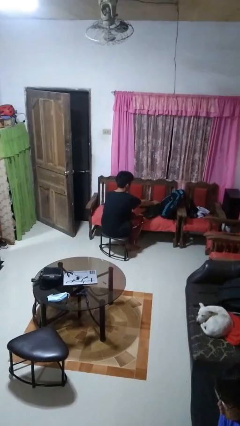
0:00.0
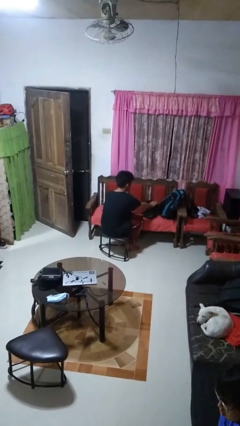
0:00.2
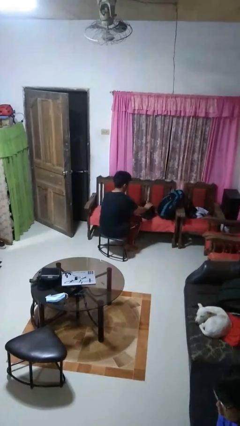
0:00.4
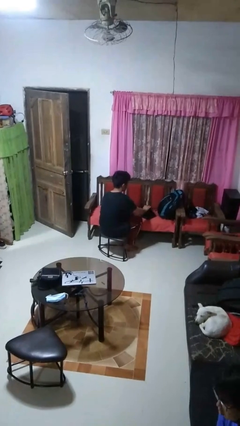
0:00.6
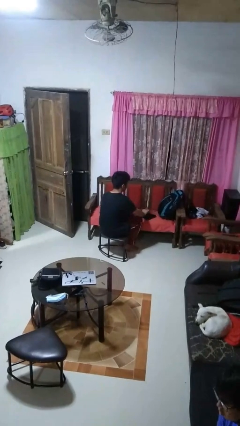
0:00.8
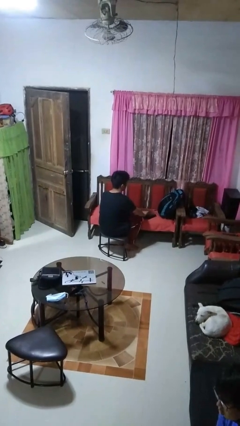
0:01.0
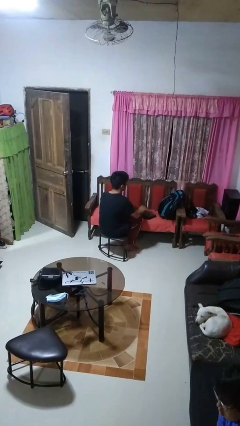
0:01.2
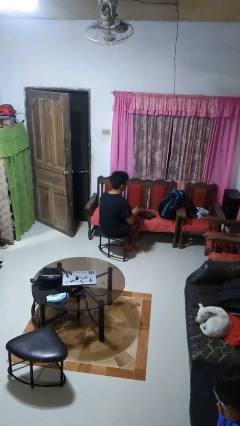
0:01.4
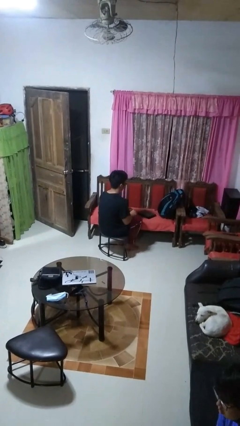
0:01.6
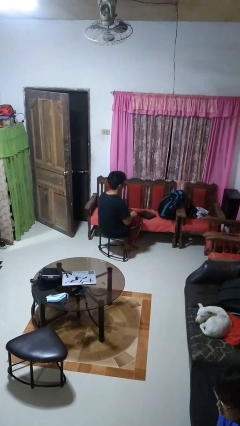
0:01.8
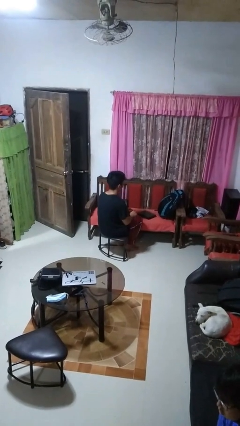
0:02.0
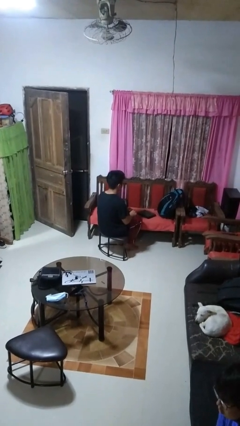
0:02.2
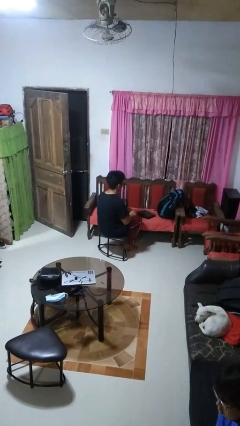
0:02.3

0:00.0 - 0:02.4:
person closes laptop

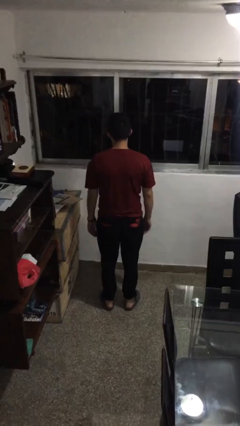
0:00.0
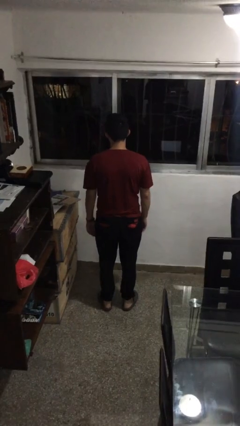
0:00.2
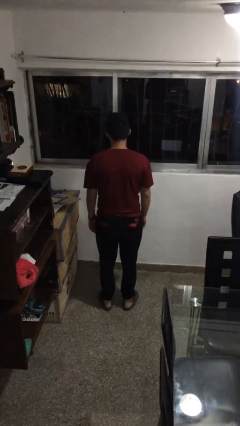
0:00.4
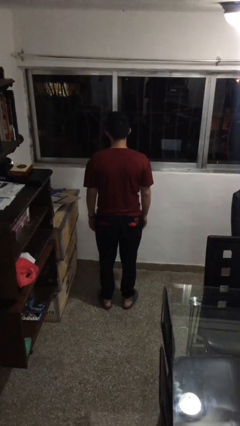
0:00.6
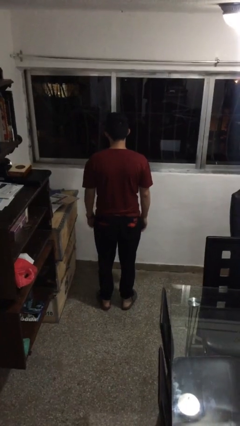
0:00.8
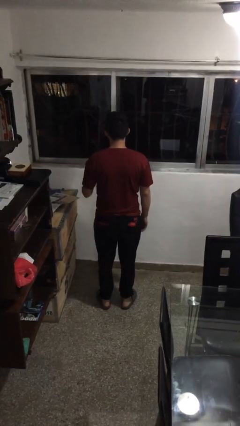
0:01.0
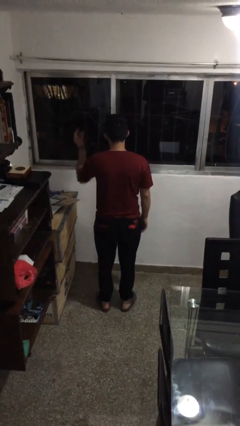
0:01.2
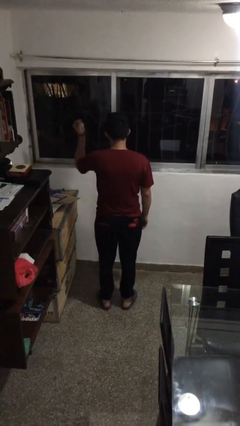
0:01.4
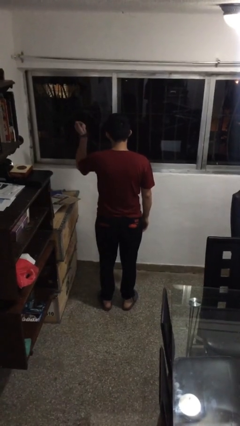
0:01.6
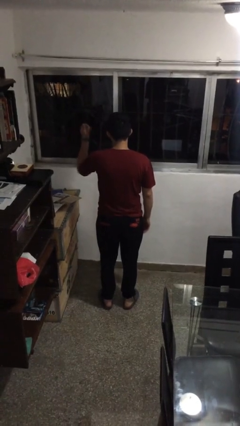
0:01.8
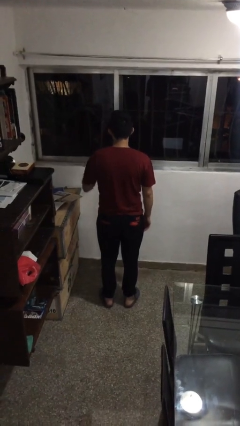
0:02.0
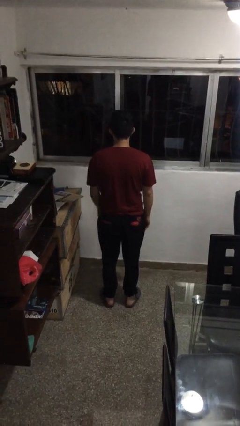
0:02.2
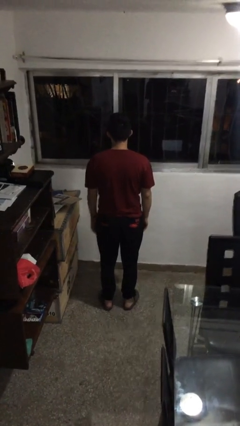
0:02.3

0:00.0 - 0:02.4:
person snaps fingers

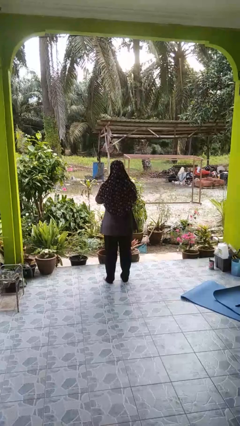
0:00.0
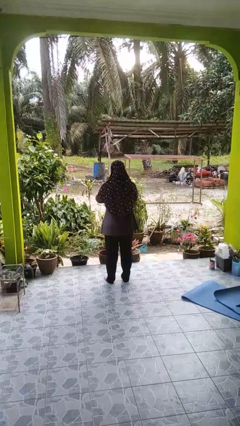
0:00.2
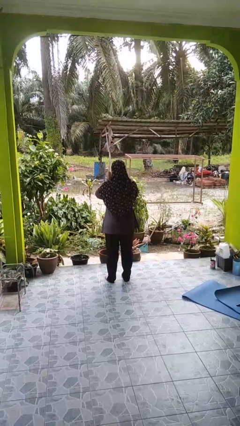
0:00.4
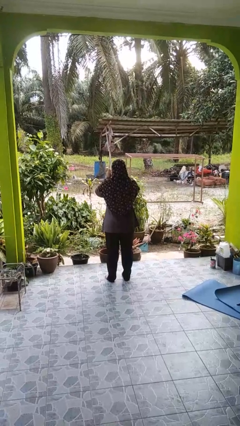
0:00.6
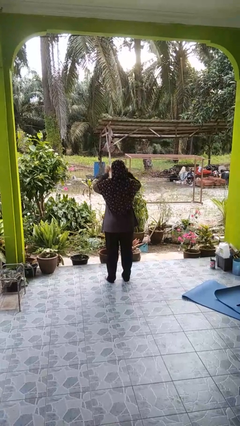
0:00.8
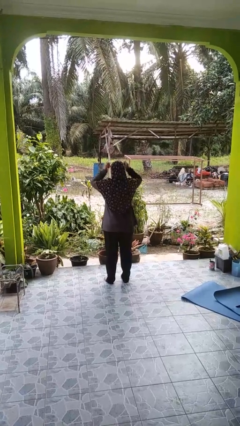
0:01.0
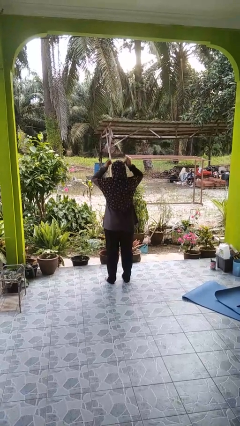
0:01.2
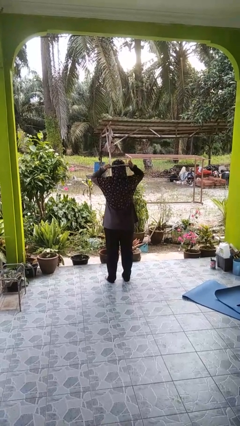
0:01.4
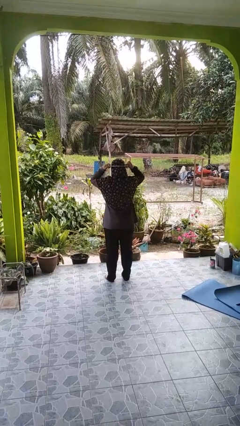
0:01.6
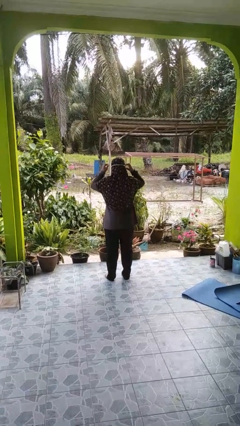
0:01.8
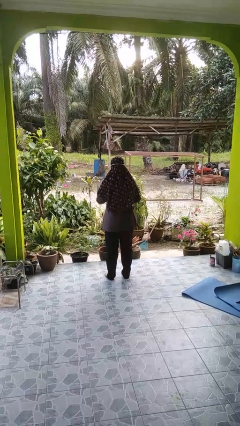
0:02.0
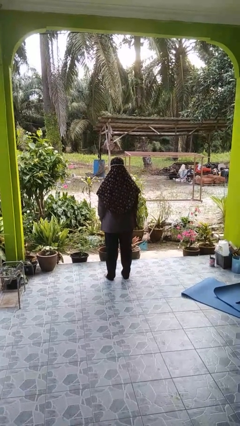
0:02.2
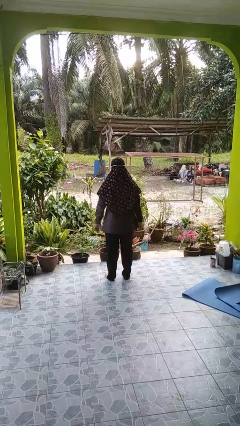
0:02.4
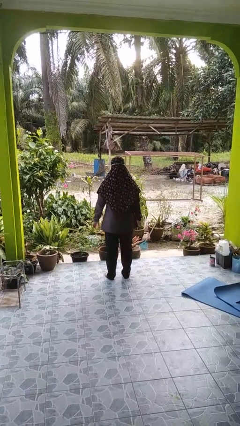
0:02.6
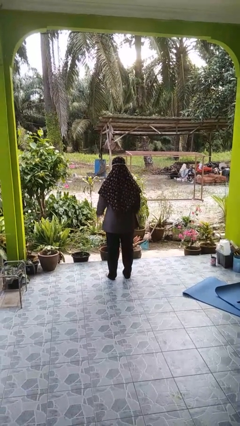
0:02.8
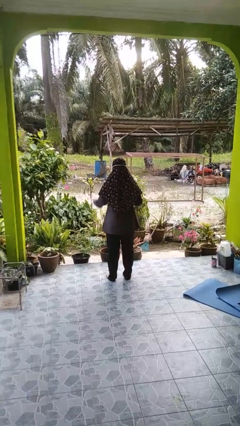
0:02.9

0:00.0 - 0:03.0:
person puts on facemask

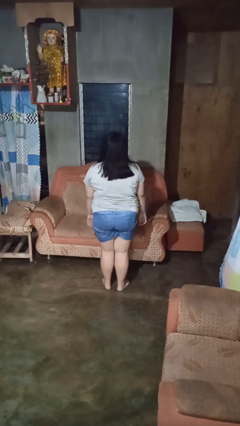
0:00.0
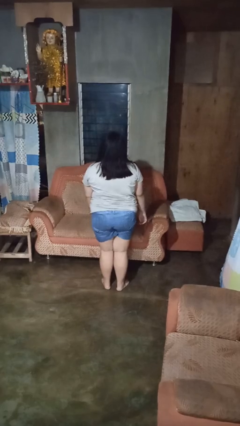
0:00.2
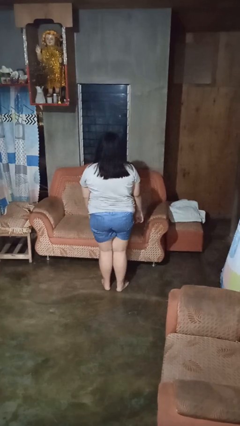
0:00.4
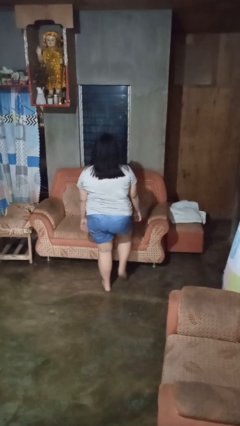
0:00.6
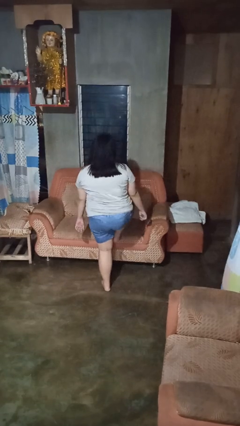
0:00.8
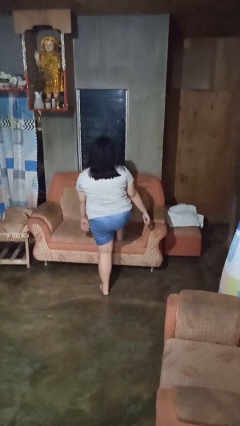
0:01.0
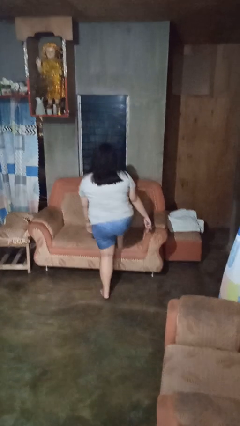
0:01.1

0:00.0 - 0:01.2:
person climbs on couch

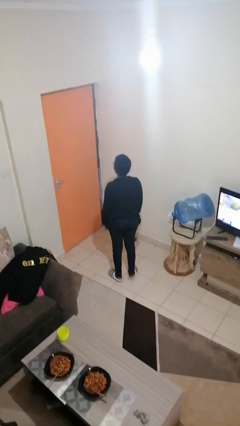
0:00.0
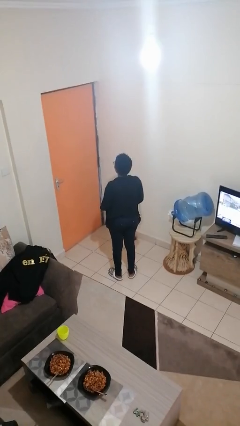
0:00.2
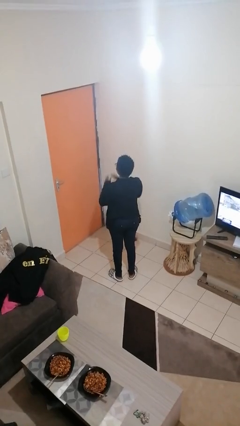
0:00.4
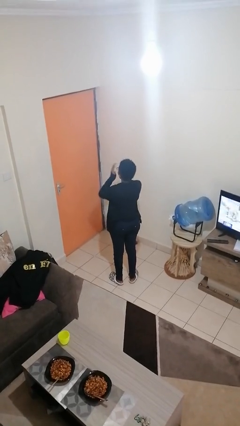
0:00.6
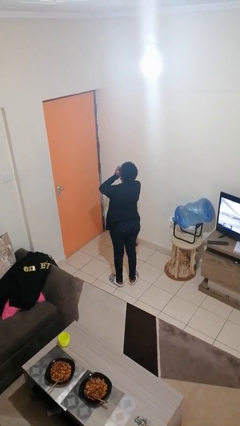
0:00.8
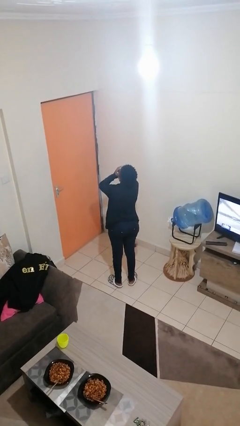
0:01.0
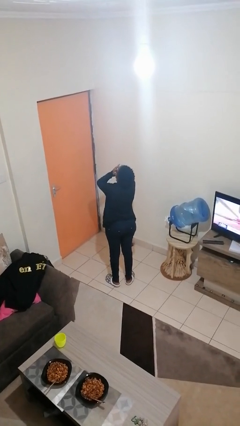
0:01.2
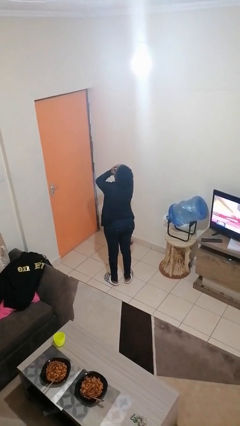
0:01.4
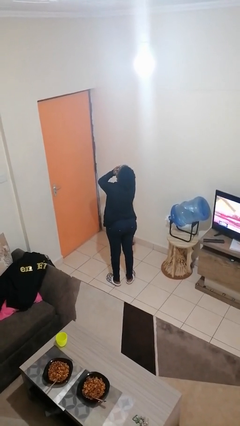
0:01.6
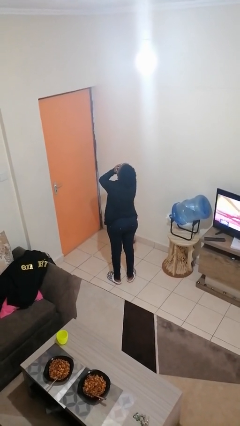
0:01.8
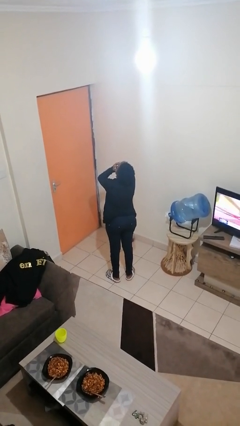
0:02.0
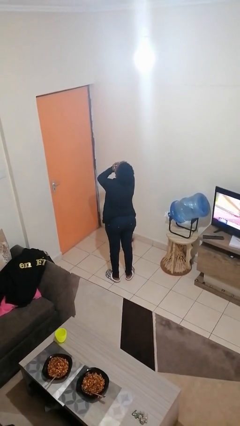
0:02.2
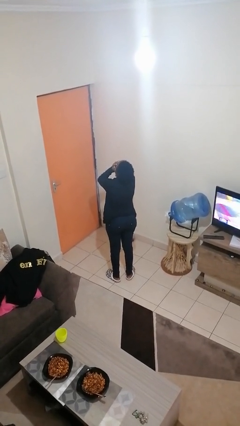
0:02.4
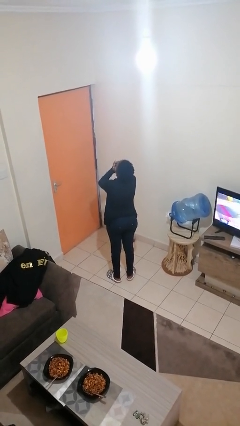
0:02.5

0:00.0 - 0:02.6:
person covers face with hands

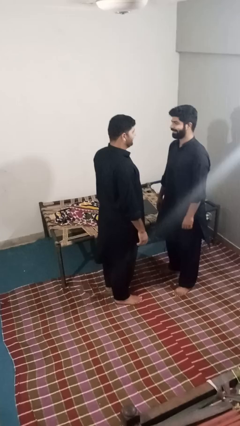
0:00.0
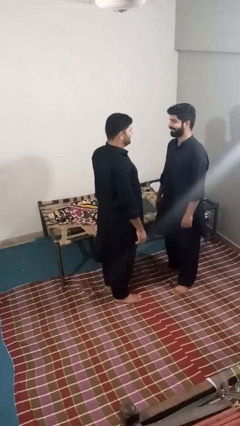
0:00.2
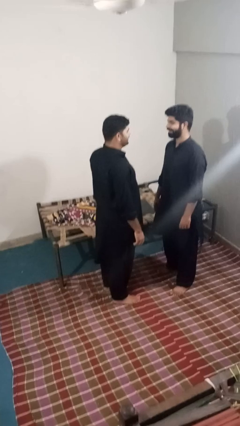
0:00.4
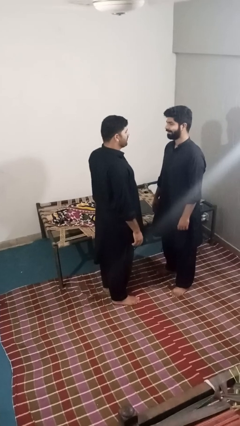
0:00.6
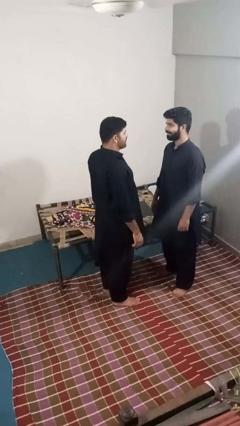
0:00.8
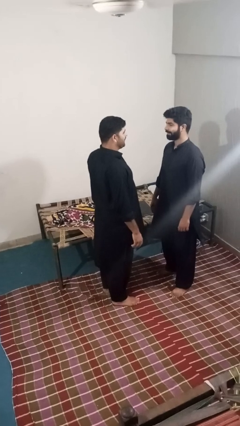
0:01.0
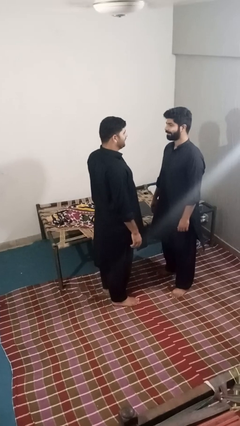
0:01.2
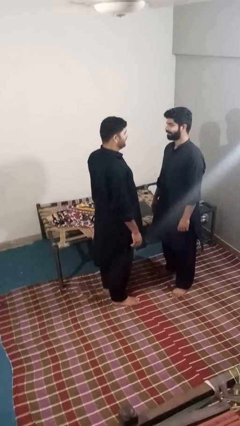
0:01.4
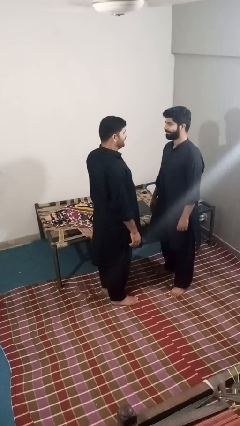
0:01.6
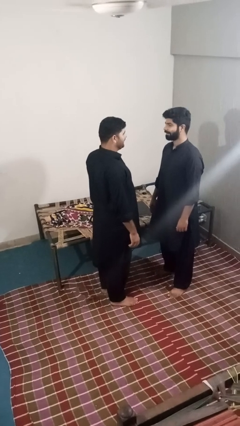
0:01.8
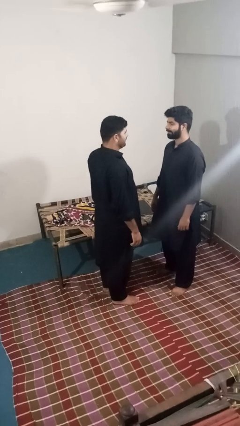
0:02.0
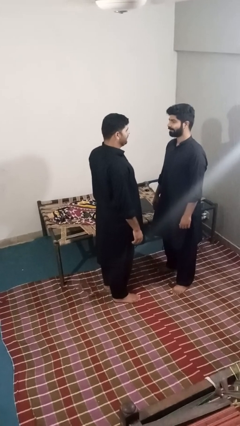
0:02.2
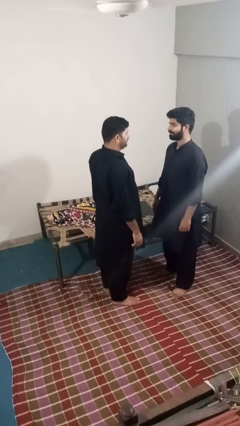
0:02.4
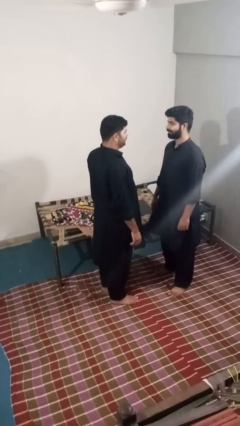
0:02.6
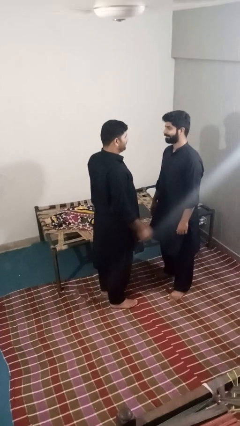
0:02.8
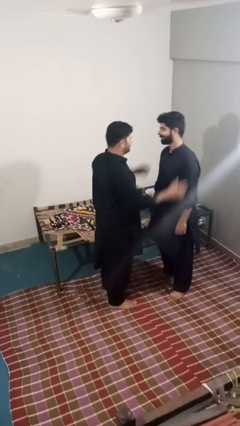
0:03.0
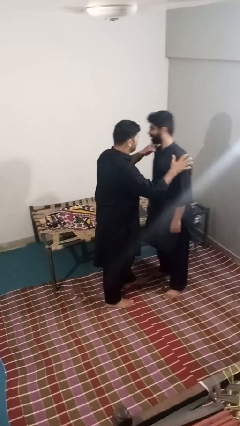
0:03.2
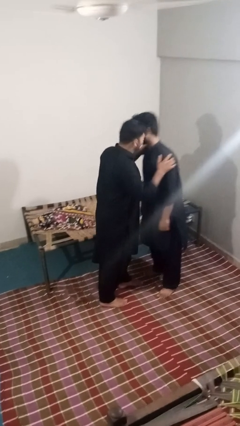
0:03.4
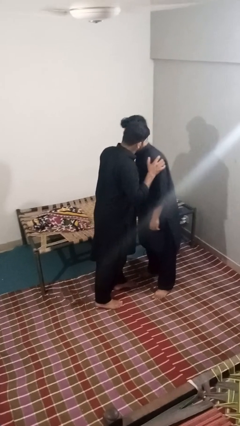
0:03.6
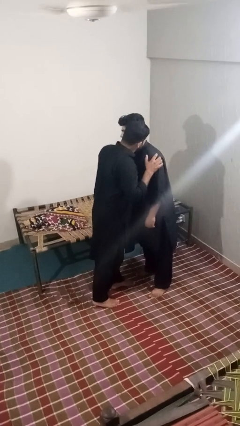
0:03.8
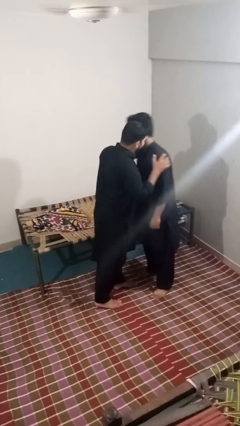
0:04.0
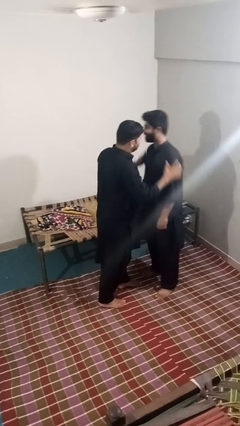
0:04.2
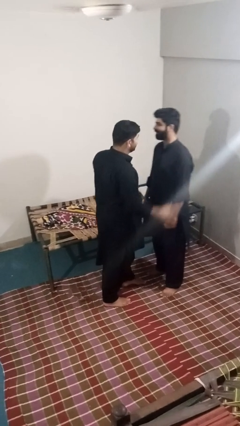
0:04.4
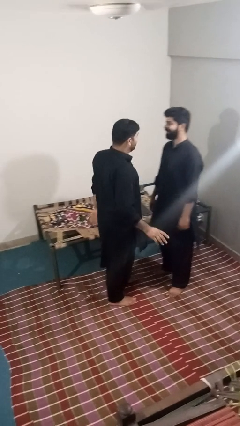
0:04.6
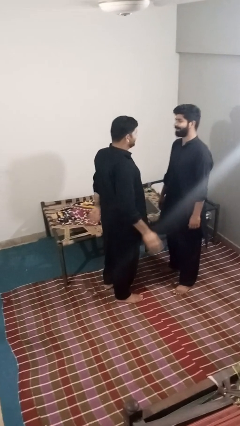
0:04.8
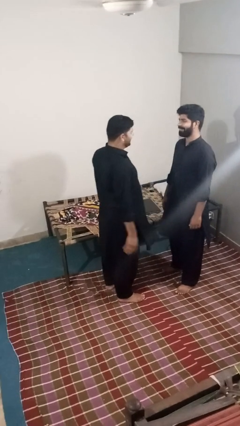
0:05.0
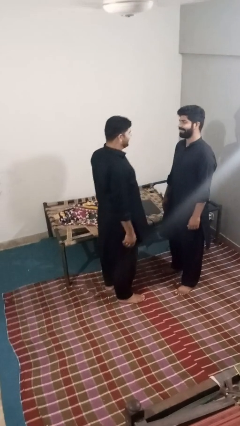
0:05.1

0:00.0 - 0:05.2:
person kisses cheek of person

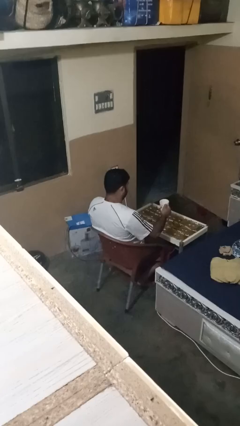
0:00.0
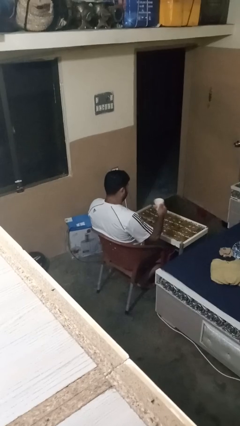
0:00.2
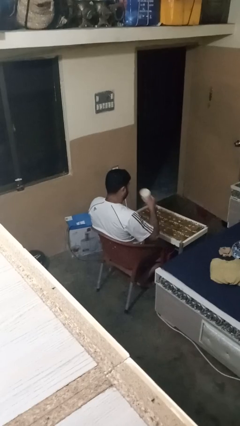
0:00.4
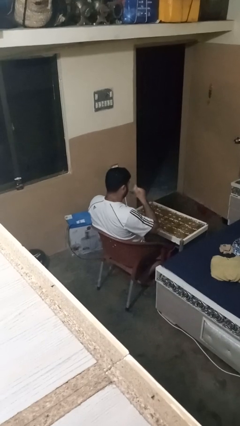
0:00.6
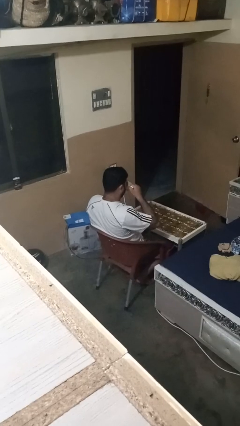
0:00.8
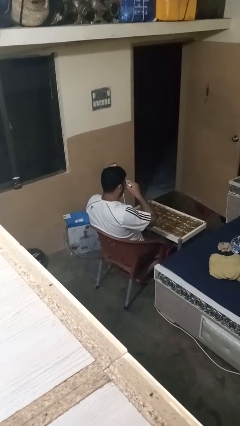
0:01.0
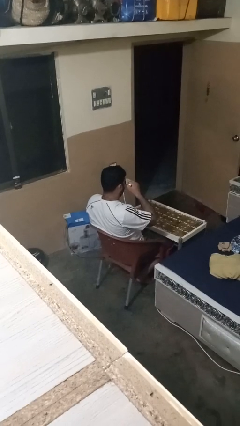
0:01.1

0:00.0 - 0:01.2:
person drinks from mug
